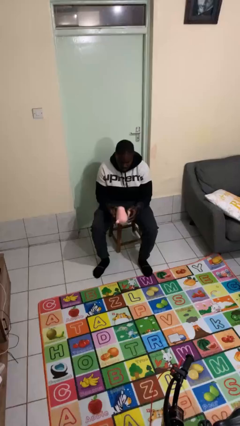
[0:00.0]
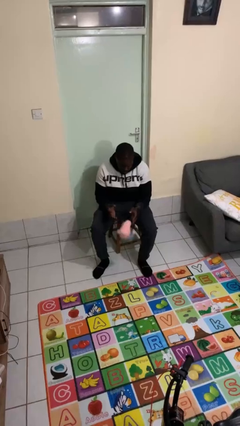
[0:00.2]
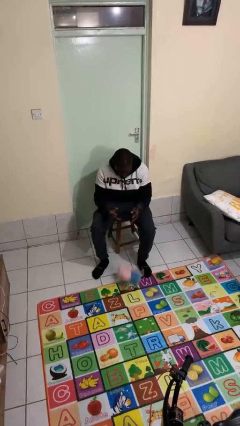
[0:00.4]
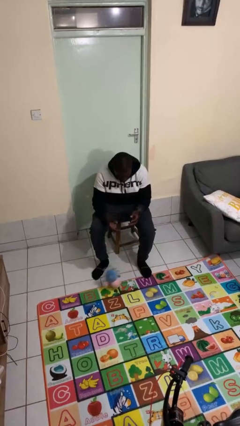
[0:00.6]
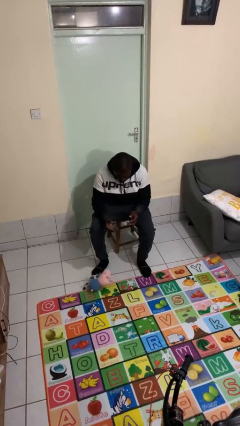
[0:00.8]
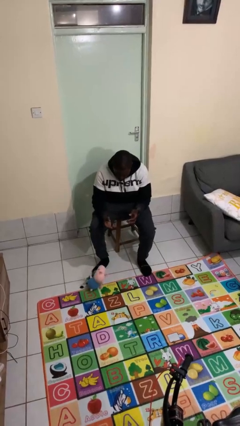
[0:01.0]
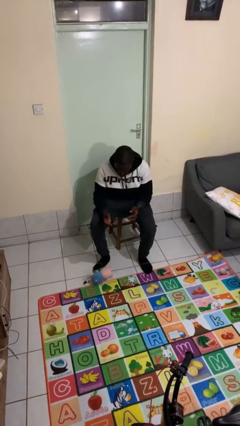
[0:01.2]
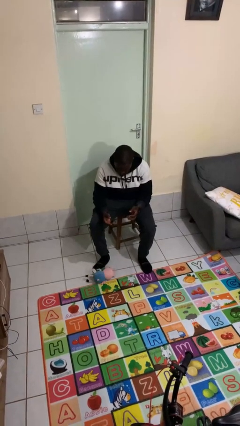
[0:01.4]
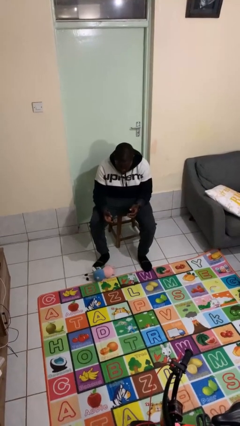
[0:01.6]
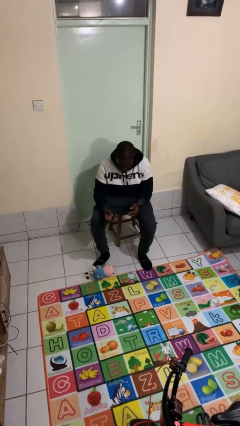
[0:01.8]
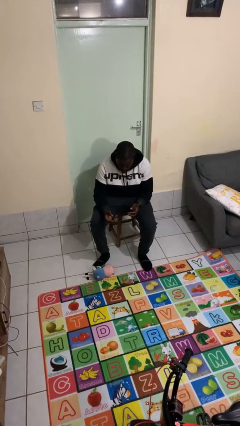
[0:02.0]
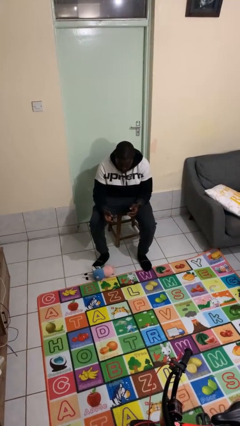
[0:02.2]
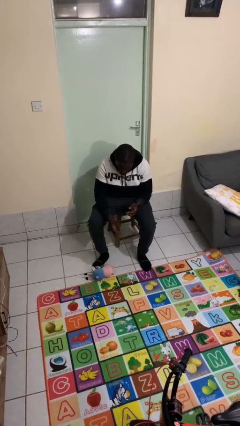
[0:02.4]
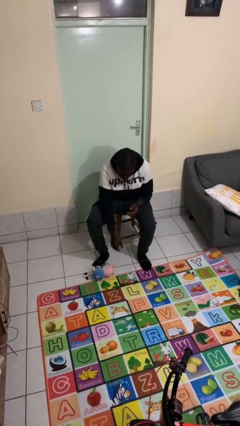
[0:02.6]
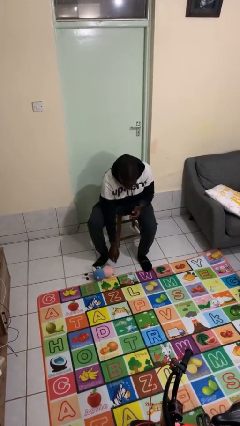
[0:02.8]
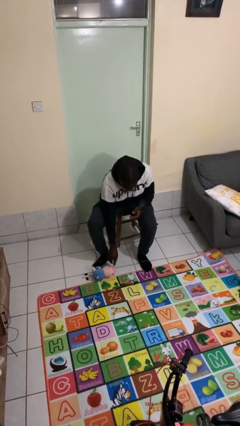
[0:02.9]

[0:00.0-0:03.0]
person drops object

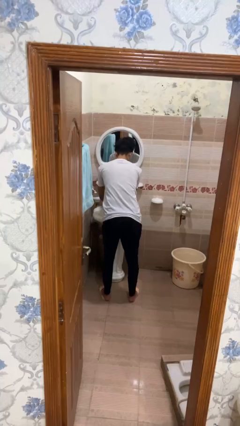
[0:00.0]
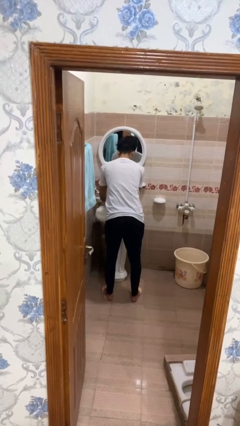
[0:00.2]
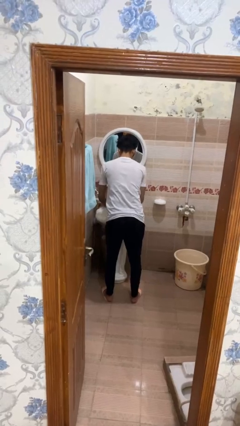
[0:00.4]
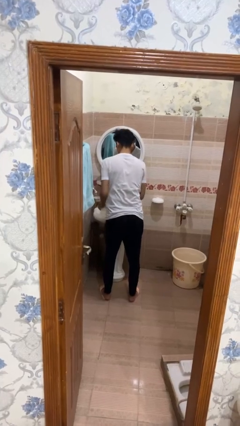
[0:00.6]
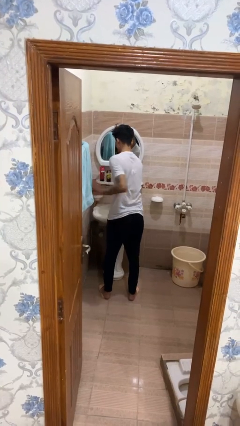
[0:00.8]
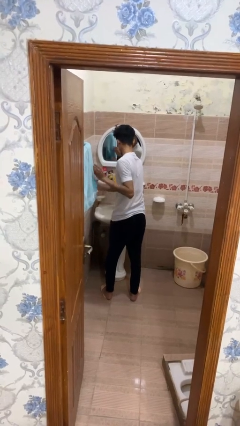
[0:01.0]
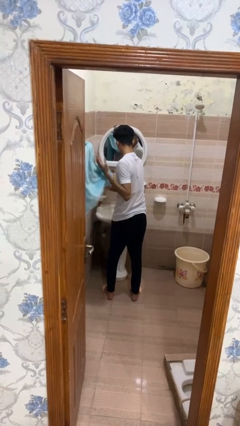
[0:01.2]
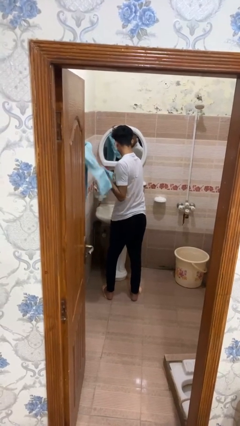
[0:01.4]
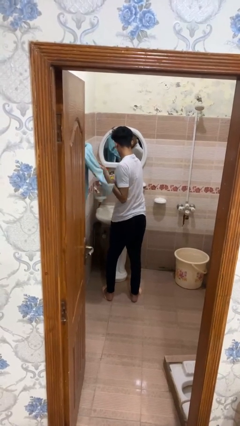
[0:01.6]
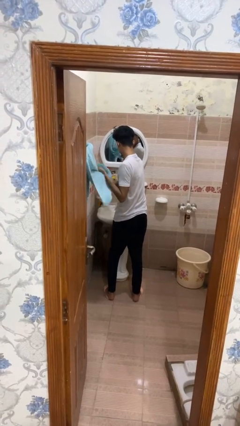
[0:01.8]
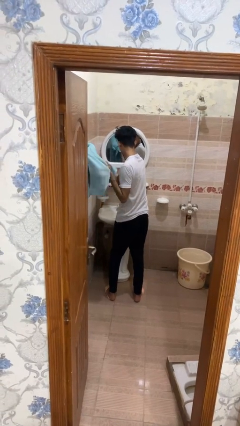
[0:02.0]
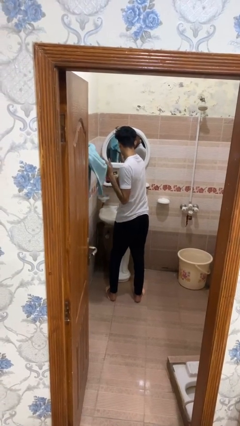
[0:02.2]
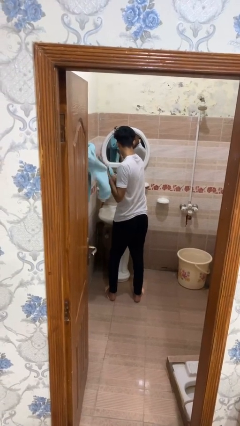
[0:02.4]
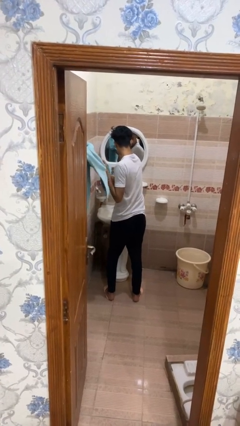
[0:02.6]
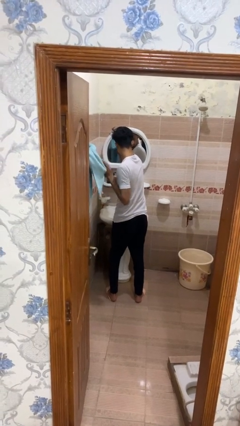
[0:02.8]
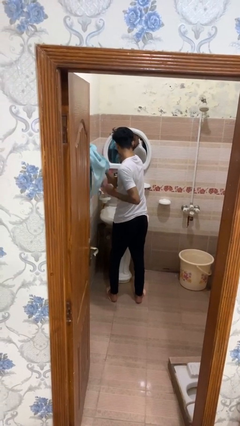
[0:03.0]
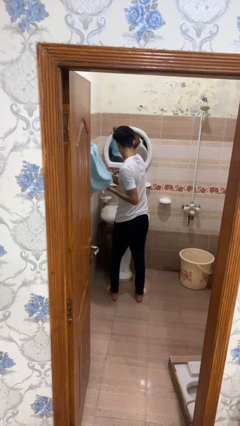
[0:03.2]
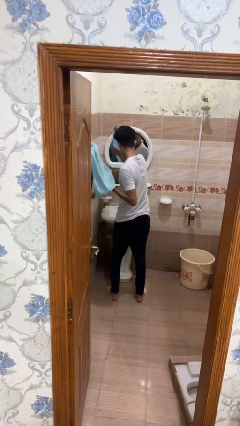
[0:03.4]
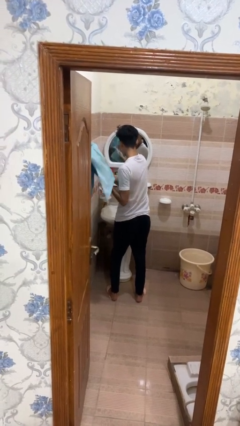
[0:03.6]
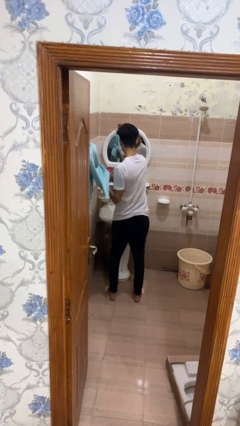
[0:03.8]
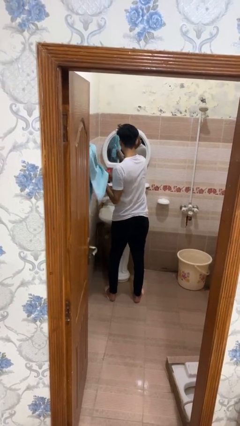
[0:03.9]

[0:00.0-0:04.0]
person dries hands with towel

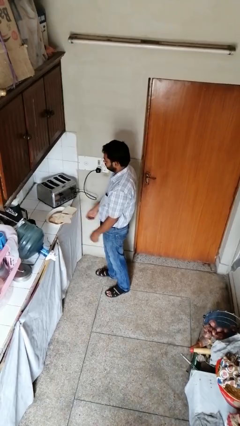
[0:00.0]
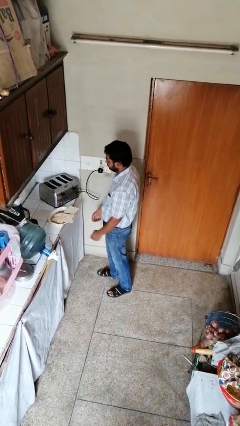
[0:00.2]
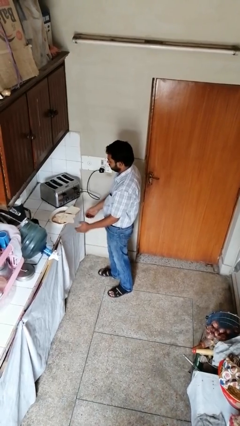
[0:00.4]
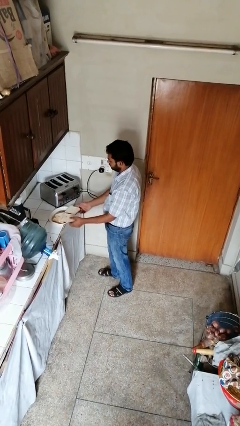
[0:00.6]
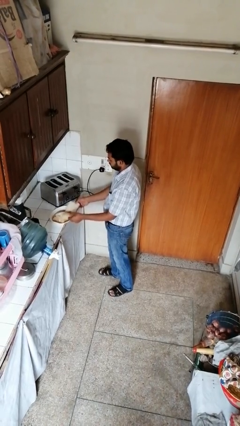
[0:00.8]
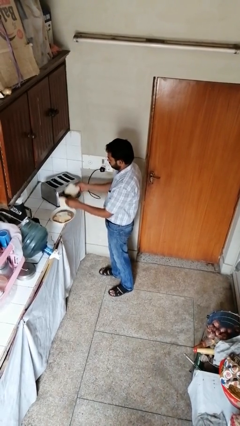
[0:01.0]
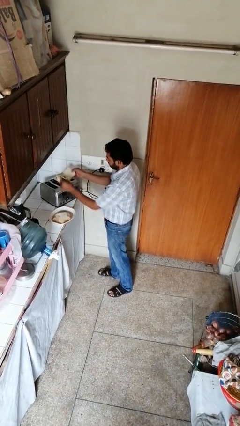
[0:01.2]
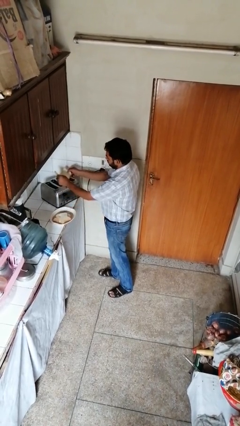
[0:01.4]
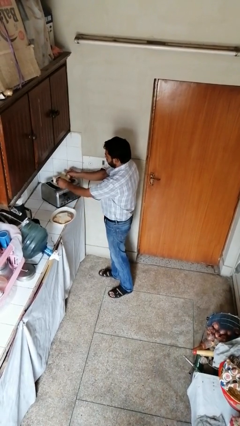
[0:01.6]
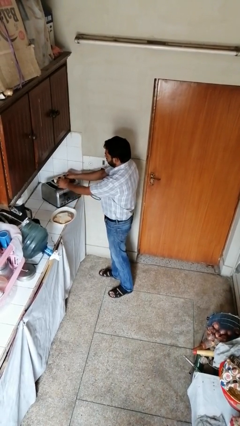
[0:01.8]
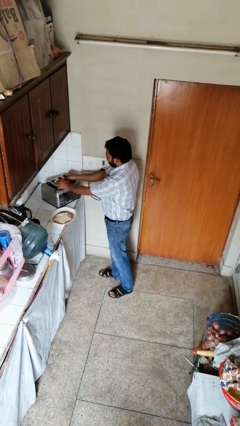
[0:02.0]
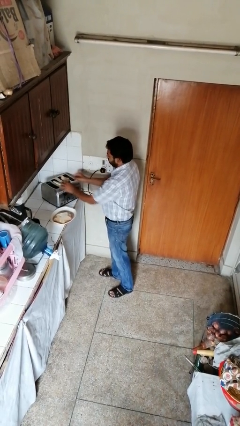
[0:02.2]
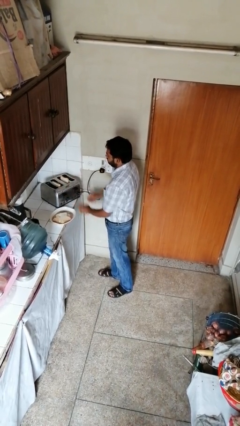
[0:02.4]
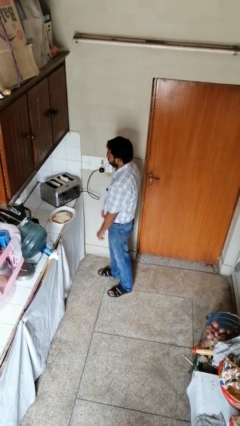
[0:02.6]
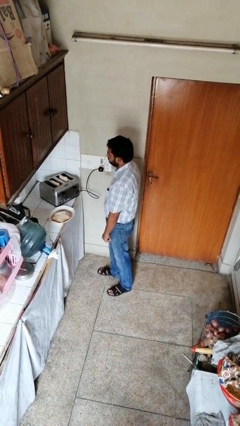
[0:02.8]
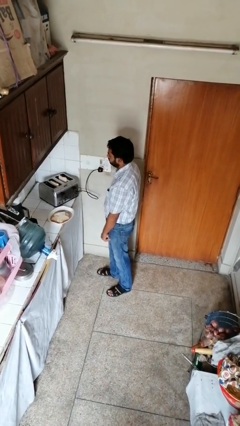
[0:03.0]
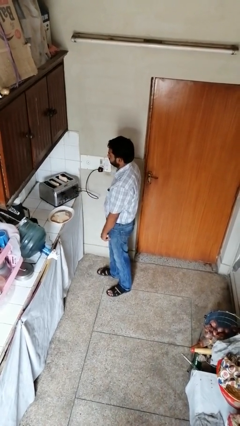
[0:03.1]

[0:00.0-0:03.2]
person puts object into toaster

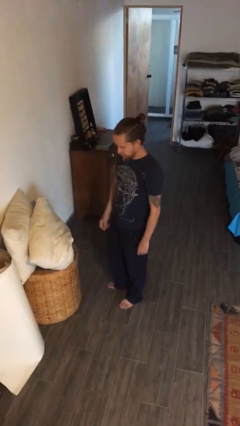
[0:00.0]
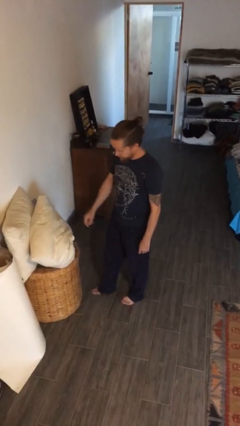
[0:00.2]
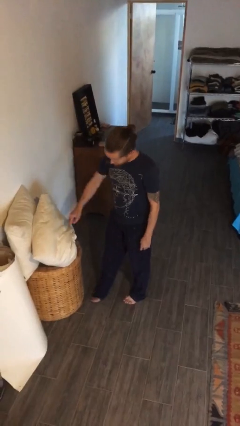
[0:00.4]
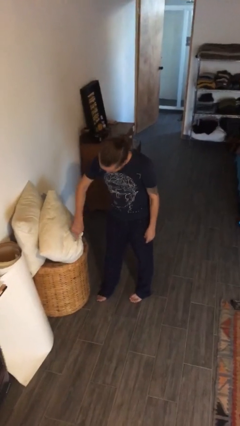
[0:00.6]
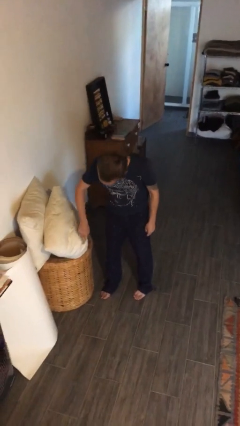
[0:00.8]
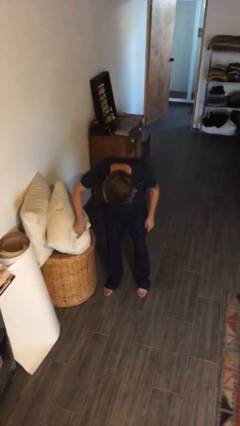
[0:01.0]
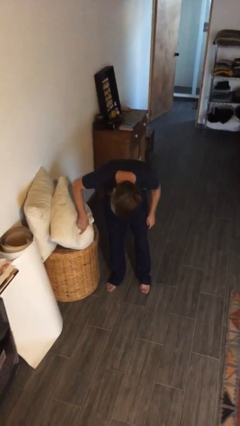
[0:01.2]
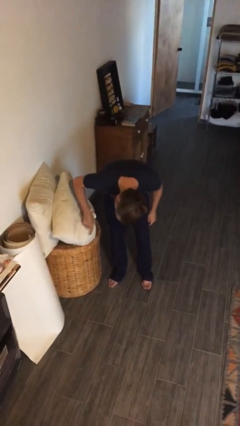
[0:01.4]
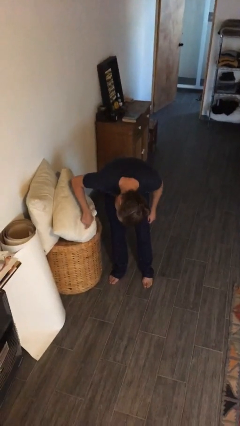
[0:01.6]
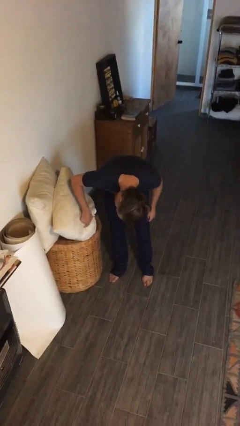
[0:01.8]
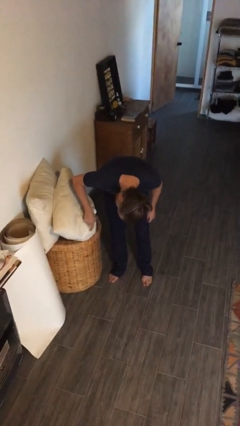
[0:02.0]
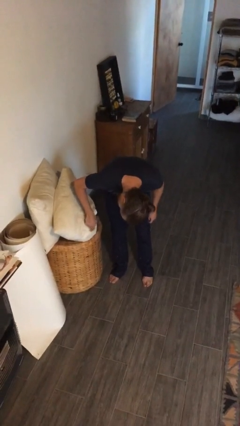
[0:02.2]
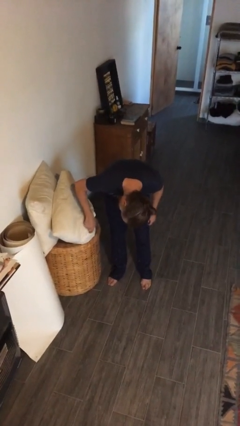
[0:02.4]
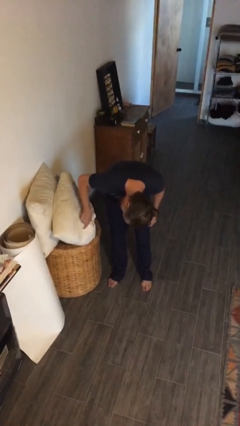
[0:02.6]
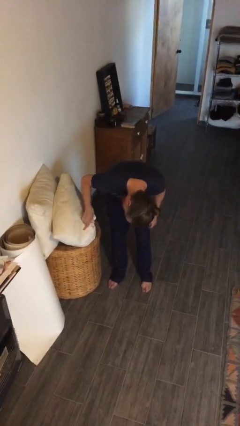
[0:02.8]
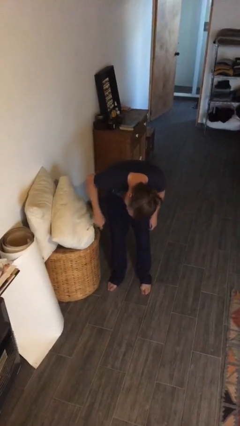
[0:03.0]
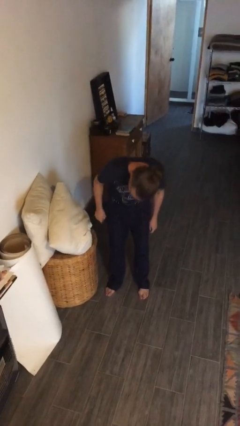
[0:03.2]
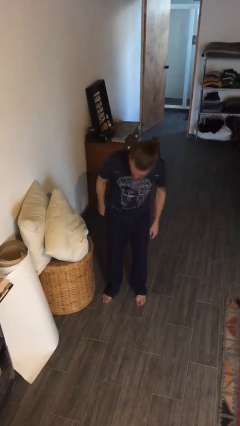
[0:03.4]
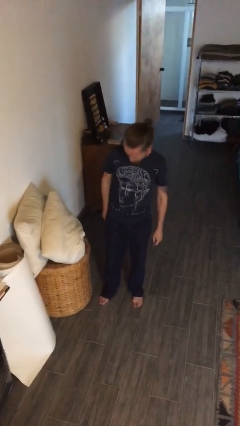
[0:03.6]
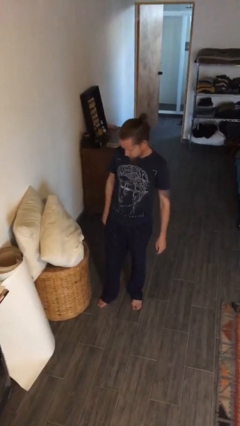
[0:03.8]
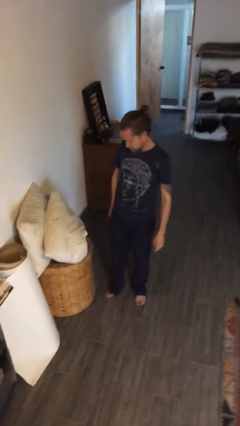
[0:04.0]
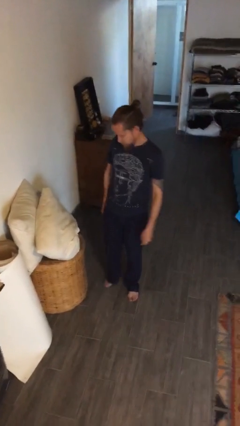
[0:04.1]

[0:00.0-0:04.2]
person taps object with finger

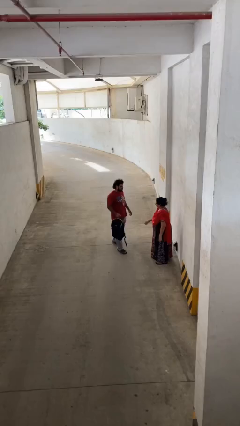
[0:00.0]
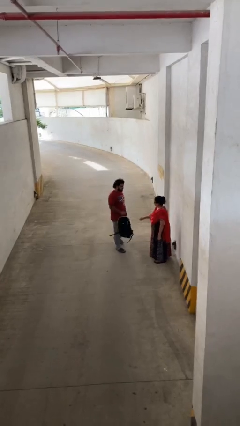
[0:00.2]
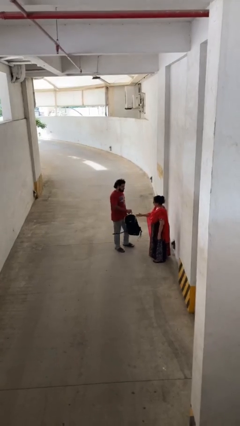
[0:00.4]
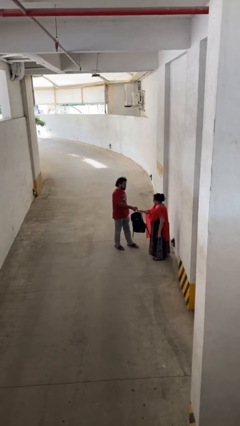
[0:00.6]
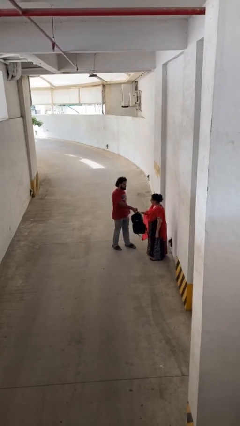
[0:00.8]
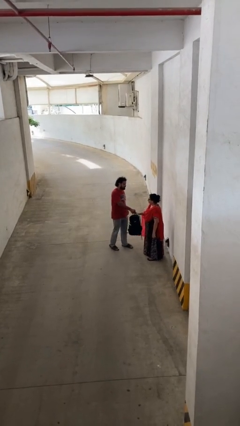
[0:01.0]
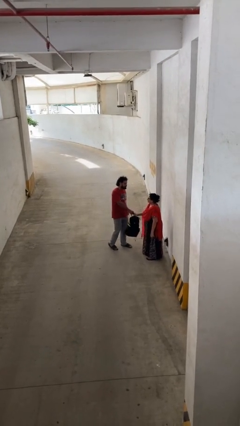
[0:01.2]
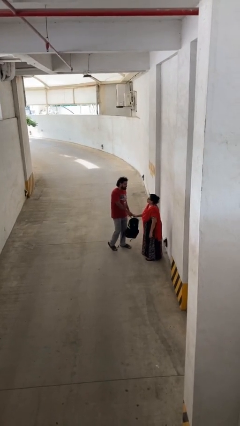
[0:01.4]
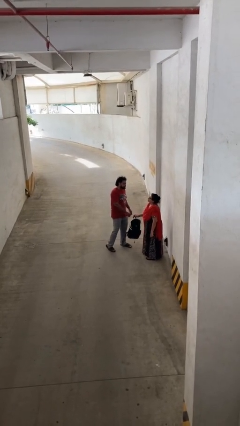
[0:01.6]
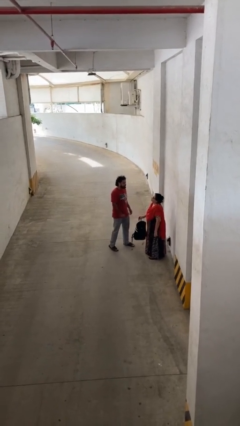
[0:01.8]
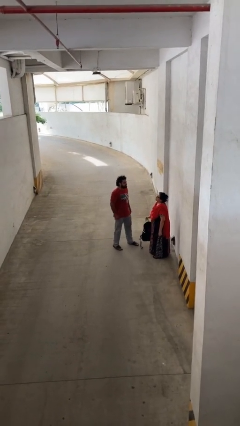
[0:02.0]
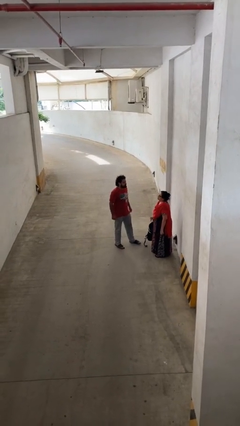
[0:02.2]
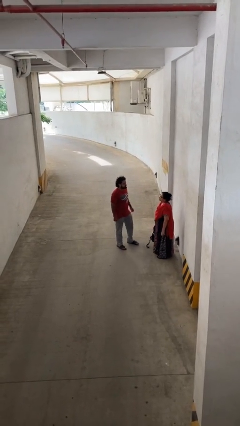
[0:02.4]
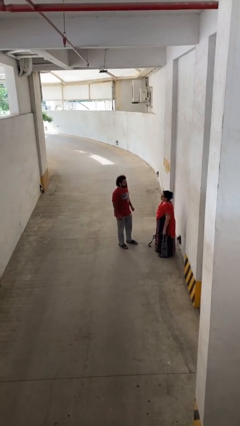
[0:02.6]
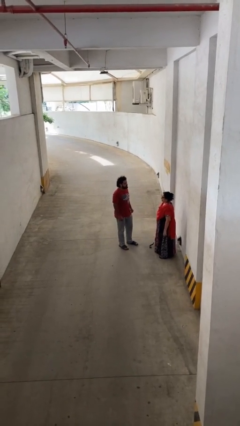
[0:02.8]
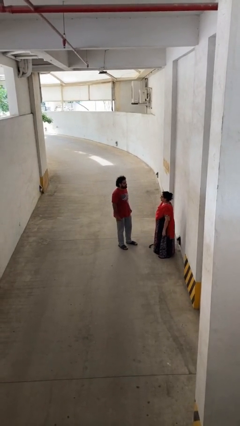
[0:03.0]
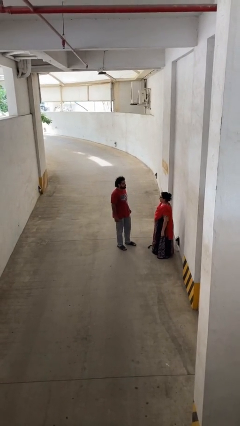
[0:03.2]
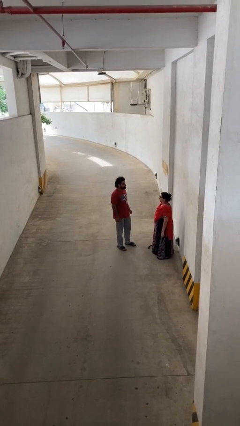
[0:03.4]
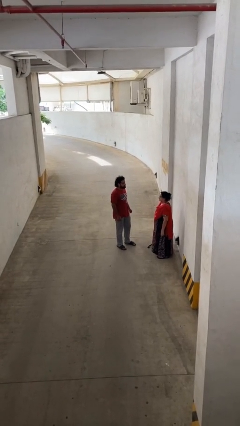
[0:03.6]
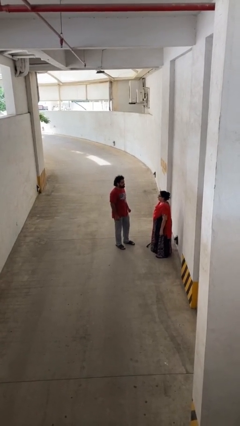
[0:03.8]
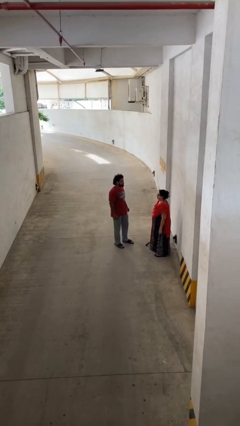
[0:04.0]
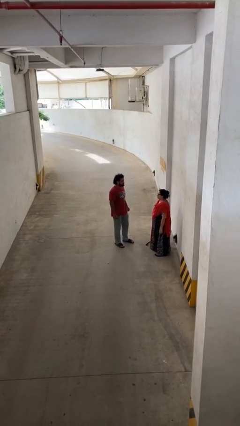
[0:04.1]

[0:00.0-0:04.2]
person transfers object to person
